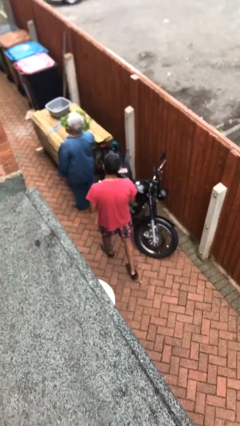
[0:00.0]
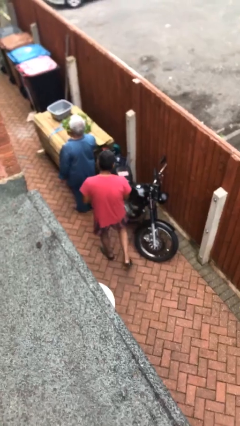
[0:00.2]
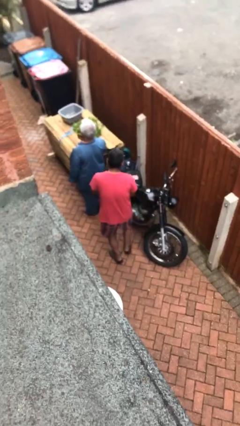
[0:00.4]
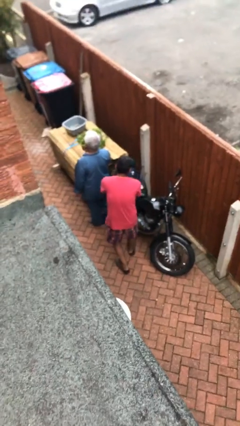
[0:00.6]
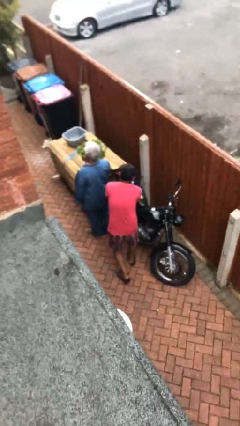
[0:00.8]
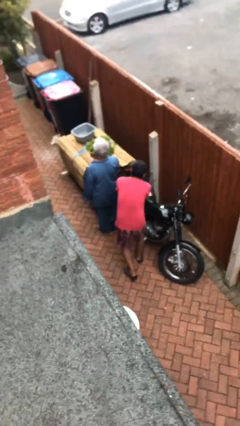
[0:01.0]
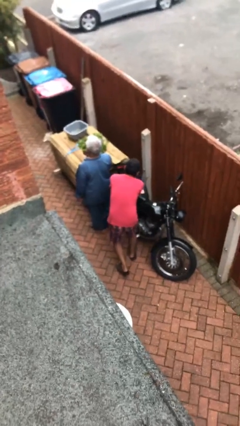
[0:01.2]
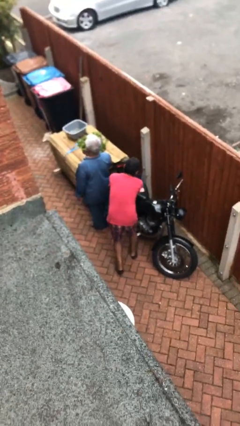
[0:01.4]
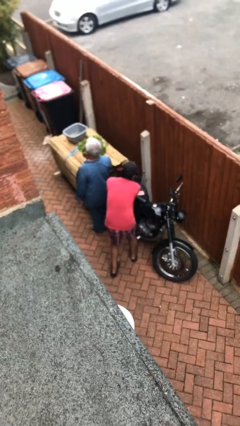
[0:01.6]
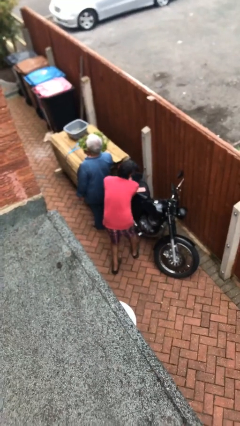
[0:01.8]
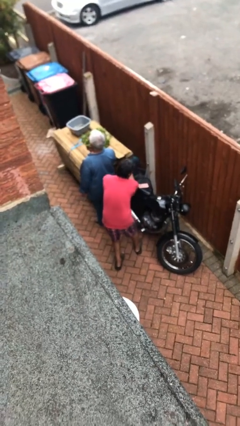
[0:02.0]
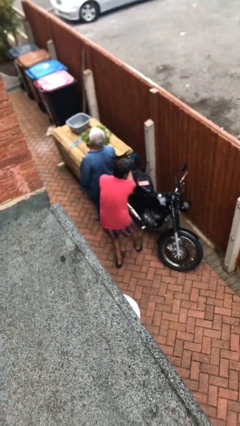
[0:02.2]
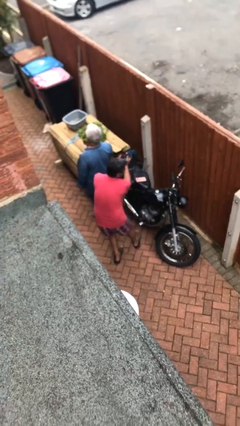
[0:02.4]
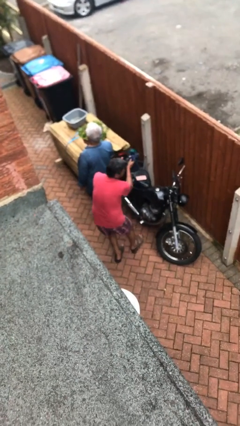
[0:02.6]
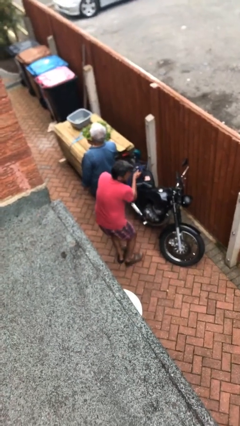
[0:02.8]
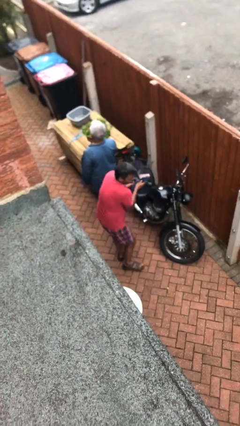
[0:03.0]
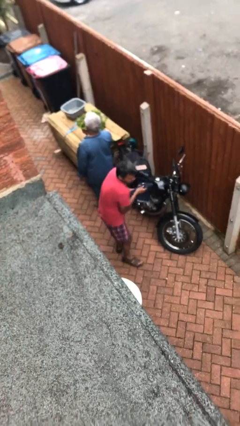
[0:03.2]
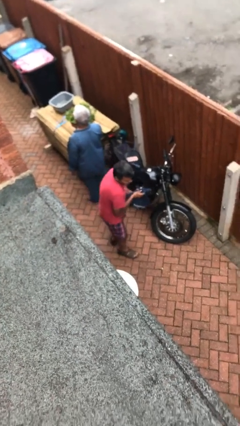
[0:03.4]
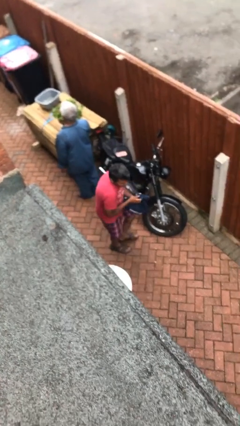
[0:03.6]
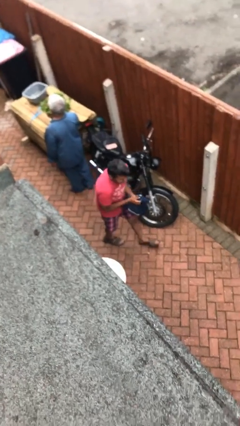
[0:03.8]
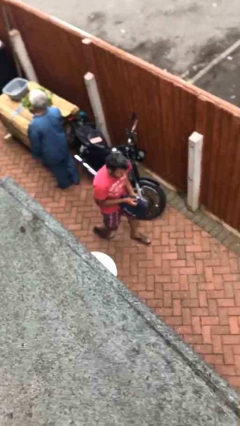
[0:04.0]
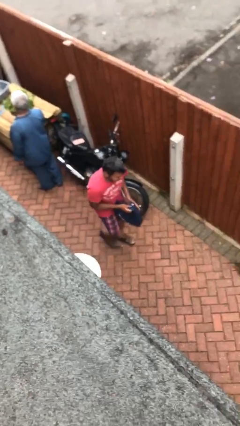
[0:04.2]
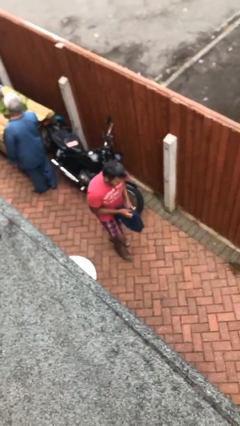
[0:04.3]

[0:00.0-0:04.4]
person steals object from person

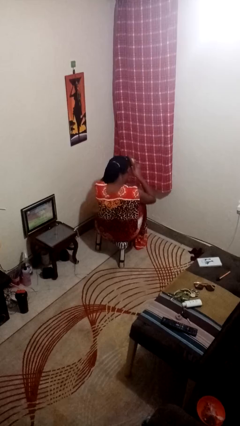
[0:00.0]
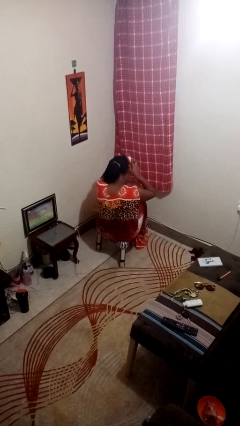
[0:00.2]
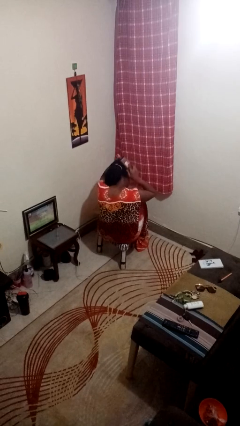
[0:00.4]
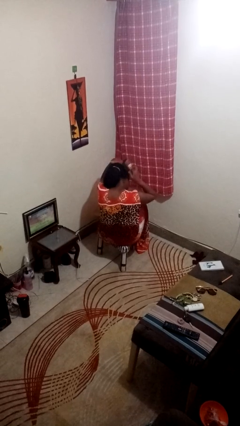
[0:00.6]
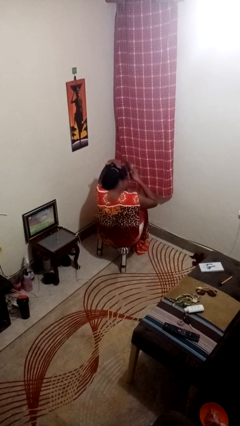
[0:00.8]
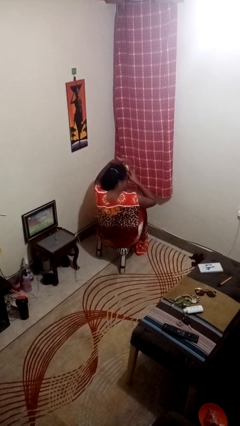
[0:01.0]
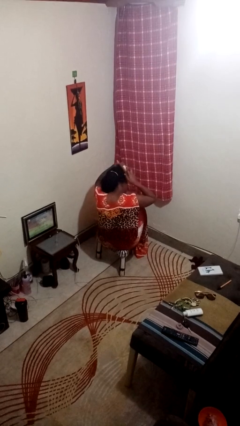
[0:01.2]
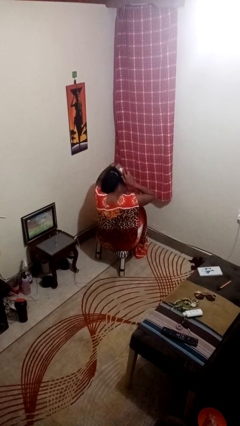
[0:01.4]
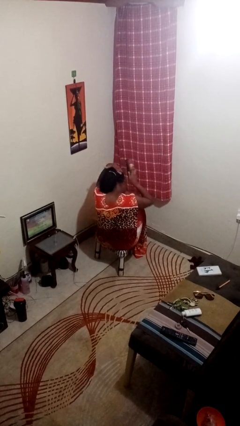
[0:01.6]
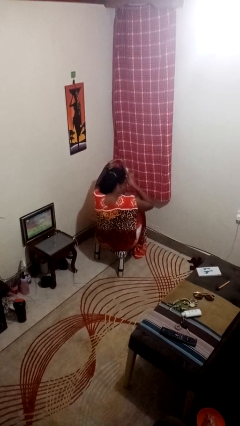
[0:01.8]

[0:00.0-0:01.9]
person brushes hair

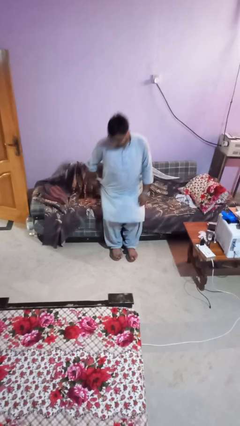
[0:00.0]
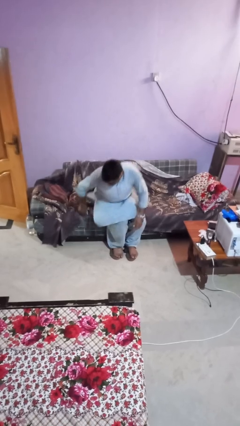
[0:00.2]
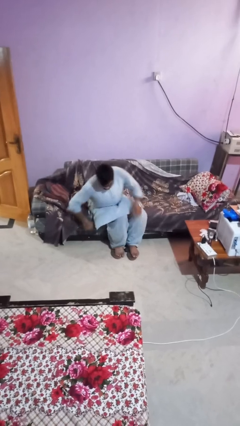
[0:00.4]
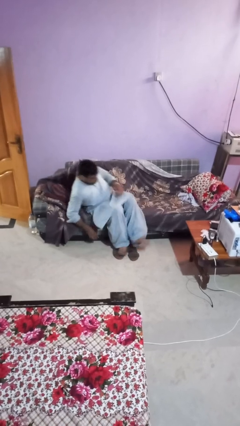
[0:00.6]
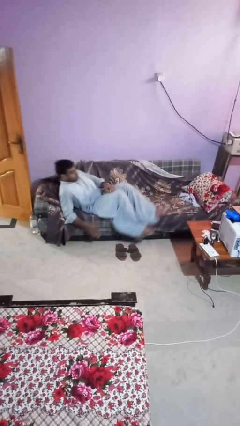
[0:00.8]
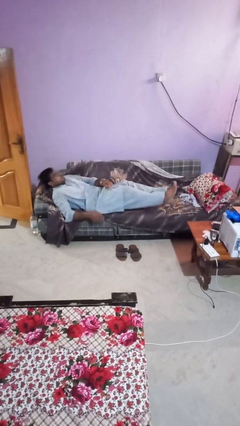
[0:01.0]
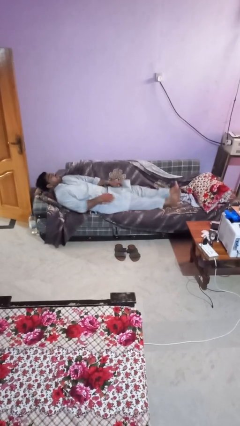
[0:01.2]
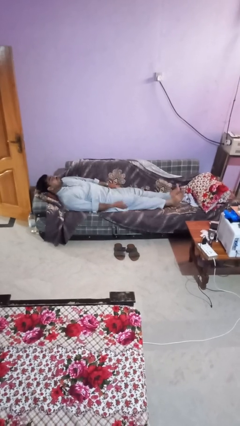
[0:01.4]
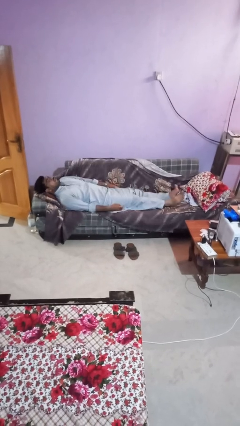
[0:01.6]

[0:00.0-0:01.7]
person lies down on couch

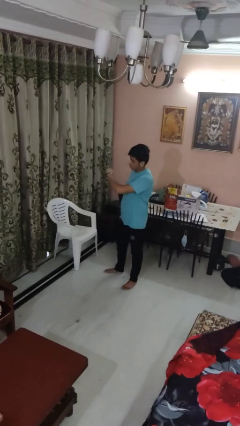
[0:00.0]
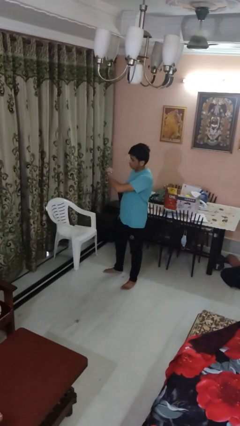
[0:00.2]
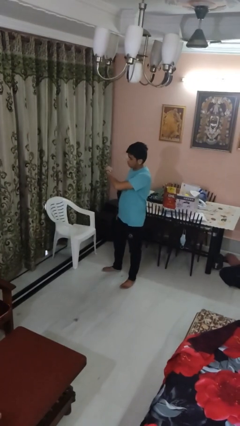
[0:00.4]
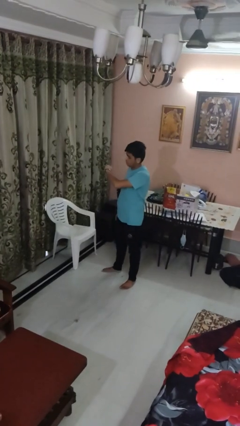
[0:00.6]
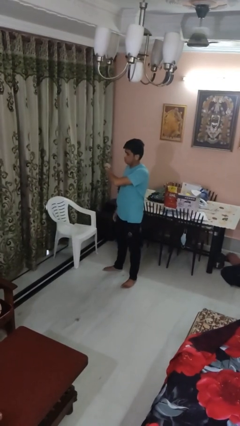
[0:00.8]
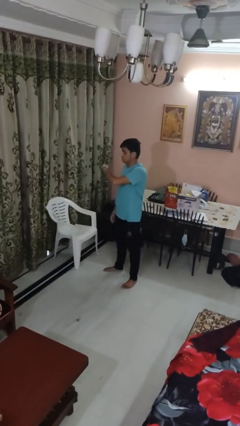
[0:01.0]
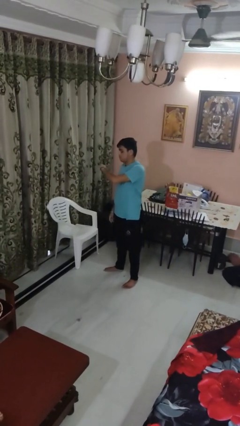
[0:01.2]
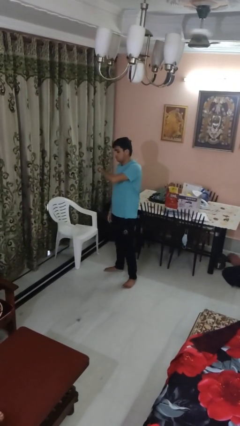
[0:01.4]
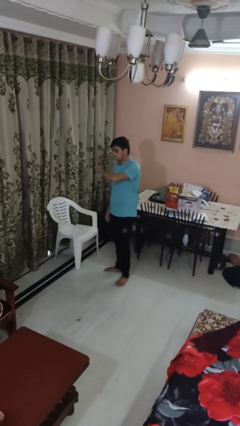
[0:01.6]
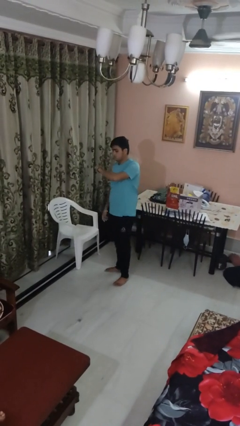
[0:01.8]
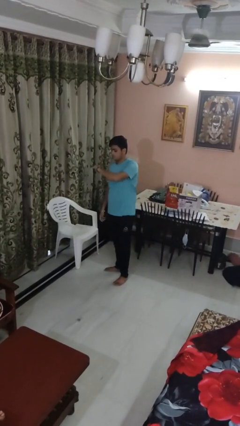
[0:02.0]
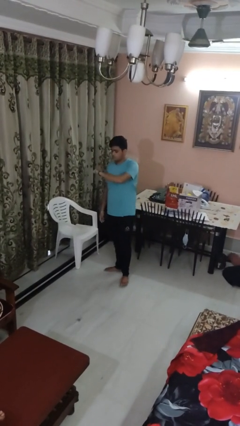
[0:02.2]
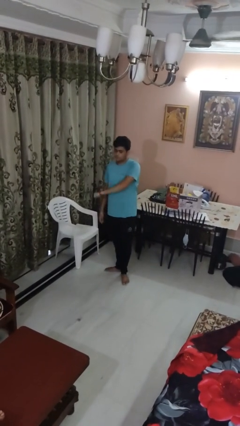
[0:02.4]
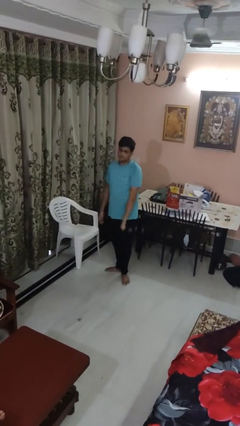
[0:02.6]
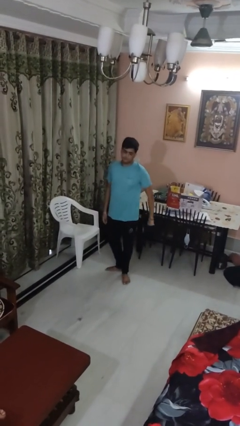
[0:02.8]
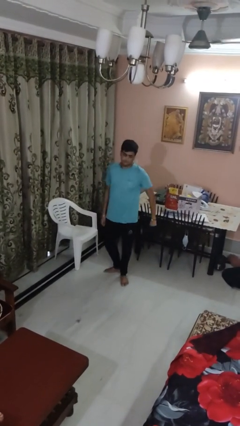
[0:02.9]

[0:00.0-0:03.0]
person looks at wristwatch

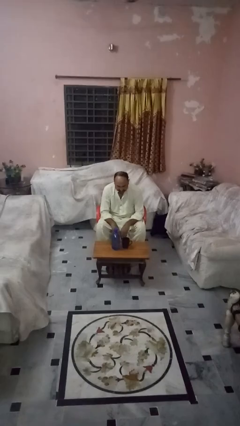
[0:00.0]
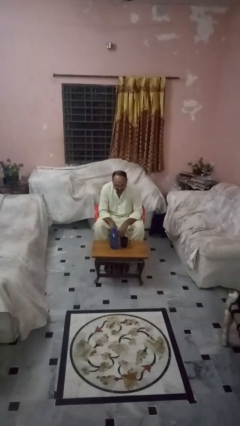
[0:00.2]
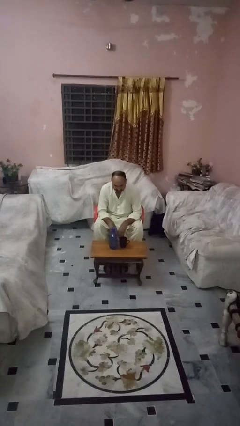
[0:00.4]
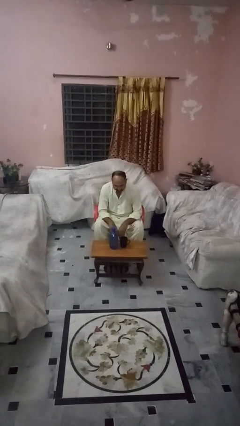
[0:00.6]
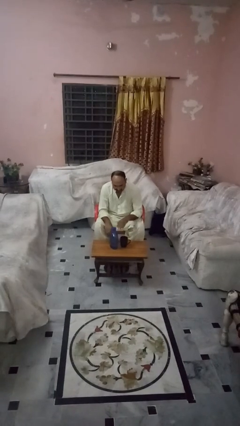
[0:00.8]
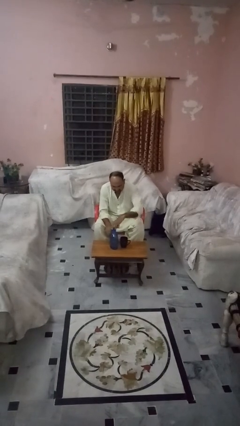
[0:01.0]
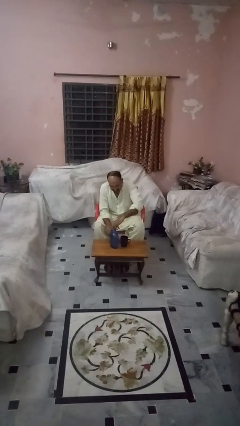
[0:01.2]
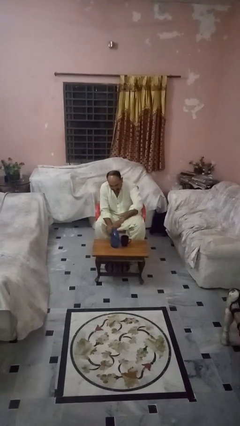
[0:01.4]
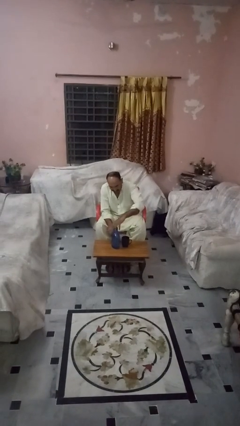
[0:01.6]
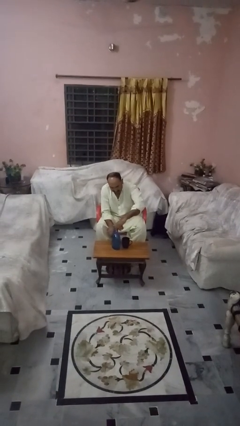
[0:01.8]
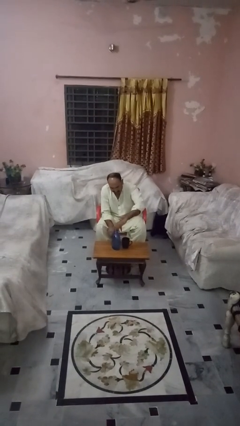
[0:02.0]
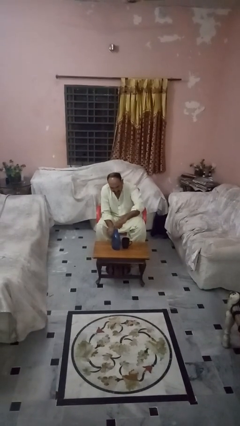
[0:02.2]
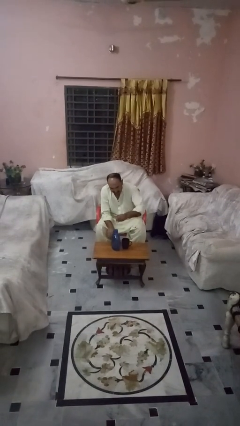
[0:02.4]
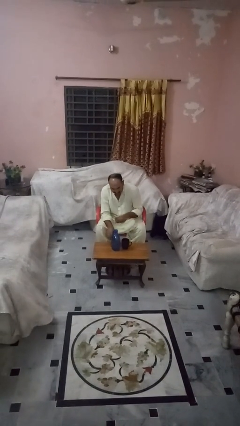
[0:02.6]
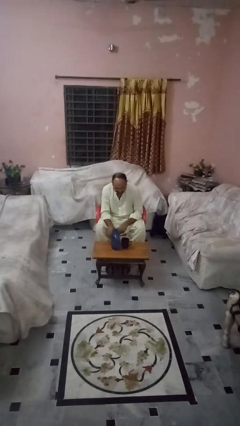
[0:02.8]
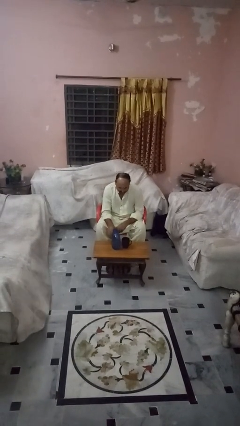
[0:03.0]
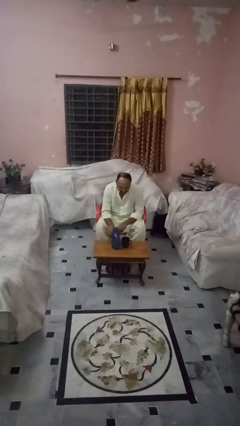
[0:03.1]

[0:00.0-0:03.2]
person unscrews lid from bottle

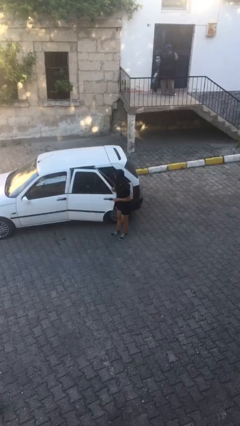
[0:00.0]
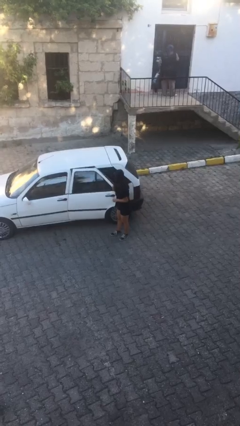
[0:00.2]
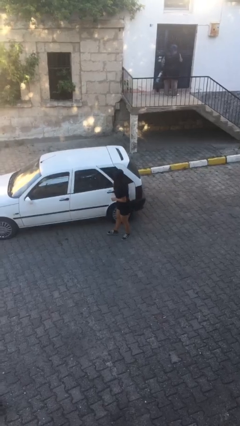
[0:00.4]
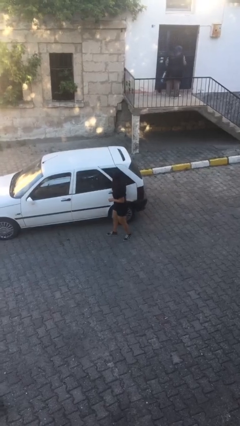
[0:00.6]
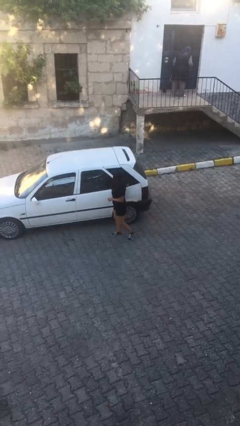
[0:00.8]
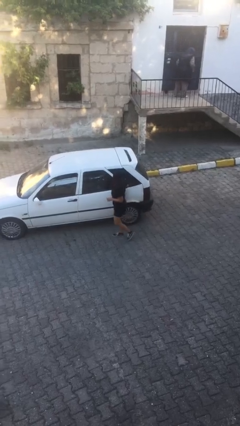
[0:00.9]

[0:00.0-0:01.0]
person closes car door

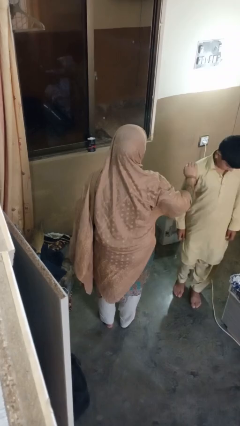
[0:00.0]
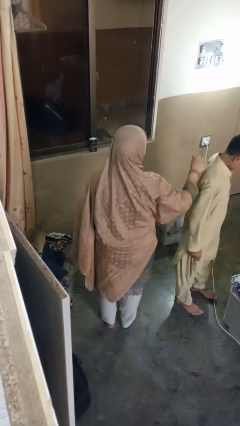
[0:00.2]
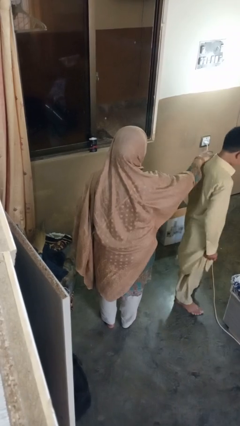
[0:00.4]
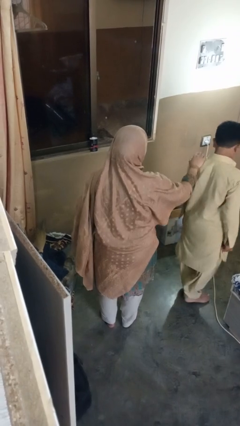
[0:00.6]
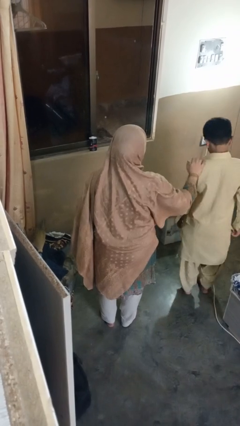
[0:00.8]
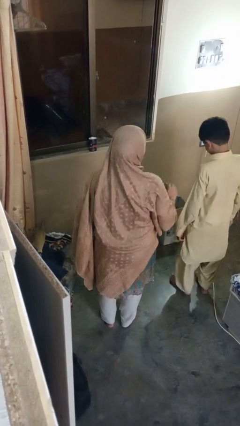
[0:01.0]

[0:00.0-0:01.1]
person spins person around

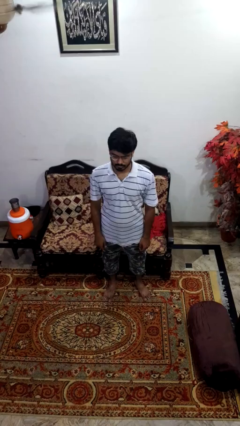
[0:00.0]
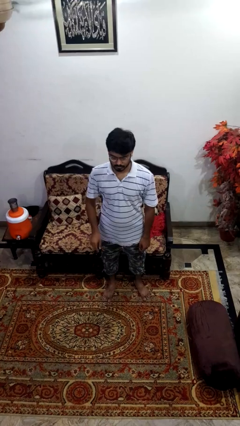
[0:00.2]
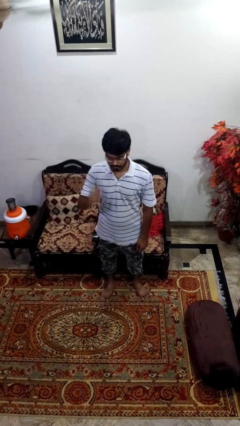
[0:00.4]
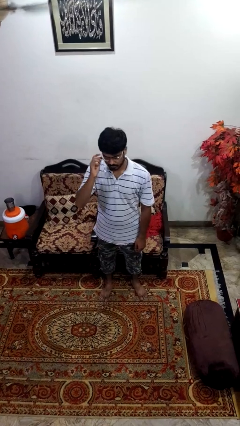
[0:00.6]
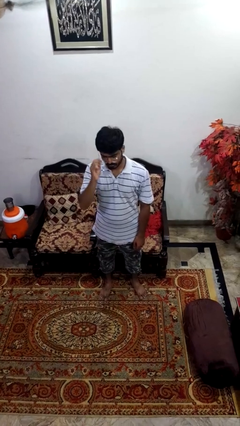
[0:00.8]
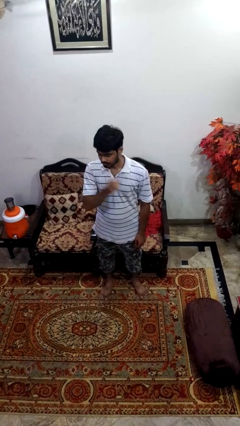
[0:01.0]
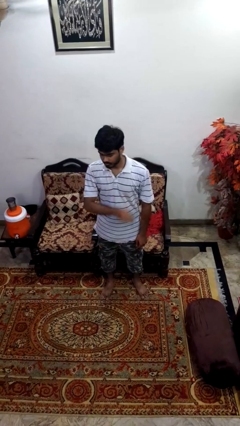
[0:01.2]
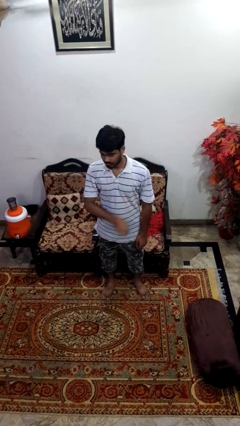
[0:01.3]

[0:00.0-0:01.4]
person takes off glasses
